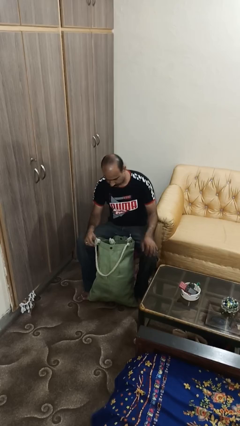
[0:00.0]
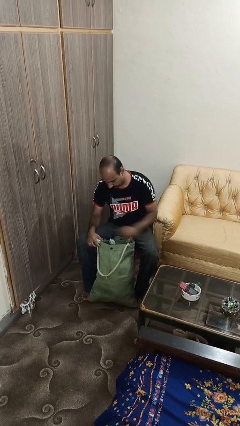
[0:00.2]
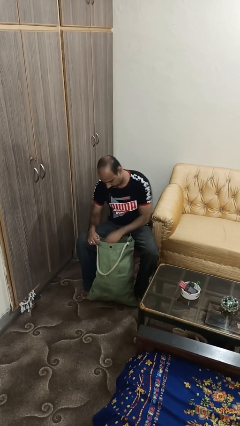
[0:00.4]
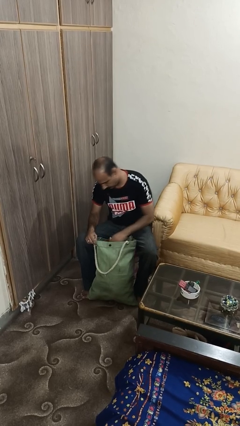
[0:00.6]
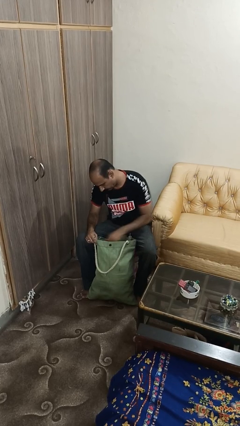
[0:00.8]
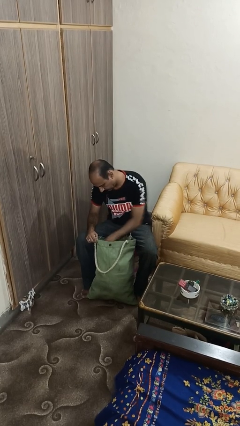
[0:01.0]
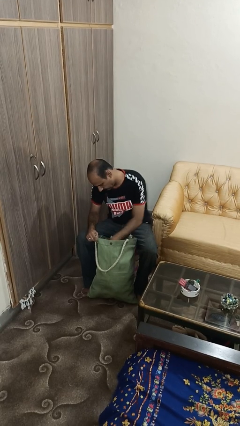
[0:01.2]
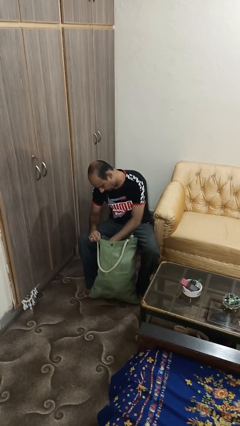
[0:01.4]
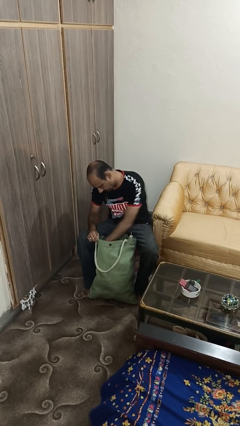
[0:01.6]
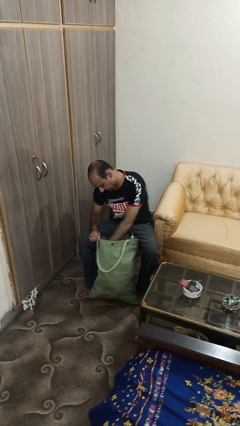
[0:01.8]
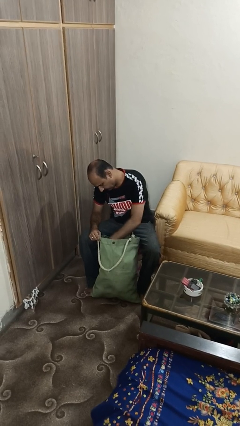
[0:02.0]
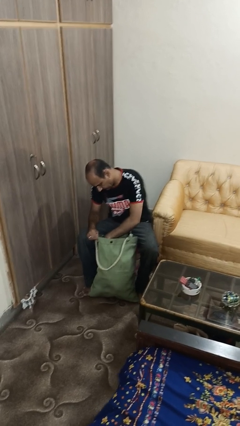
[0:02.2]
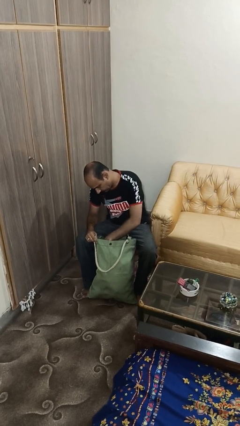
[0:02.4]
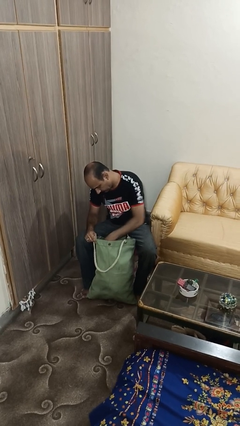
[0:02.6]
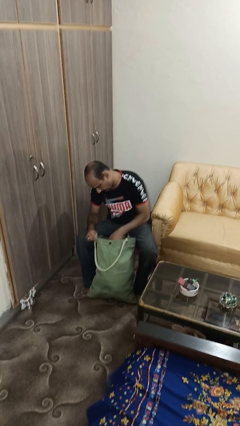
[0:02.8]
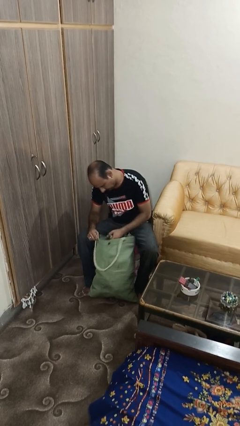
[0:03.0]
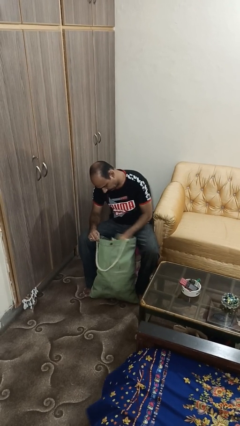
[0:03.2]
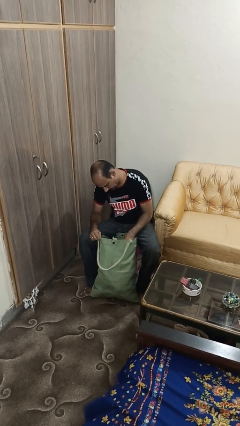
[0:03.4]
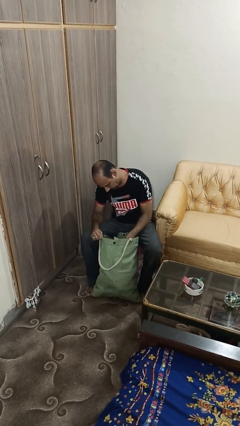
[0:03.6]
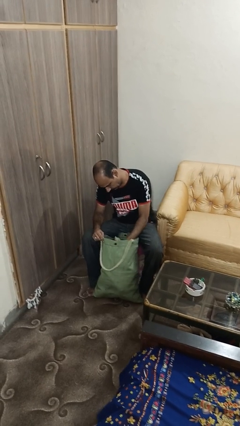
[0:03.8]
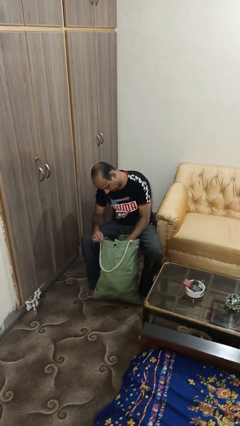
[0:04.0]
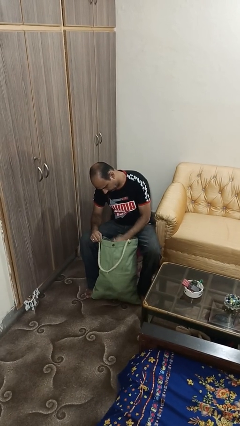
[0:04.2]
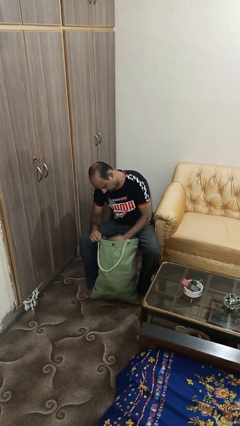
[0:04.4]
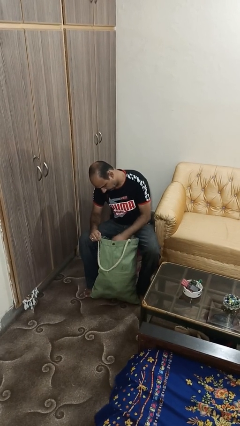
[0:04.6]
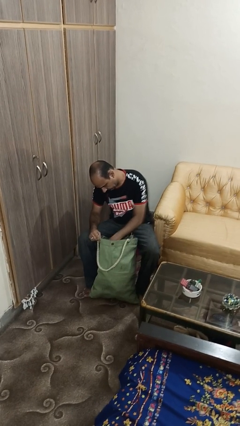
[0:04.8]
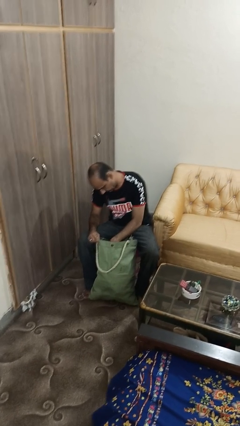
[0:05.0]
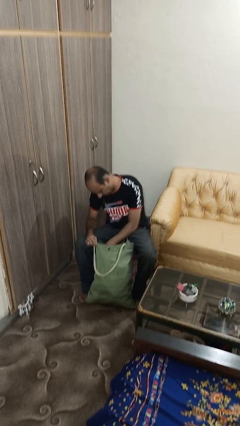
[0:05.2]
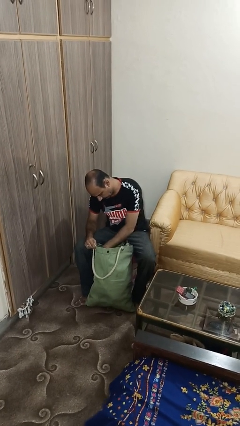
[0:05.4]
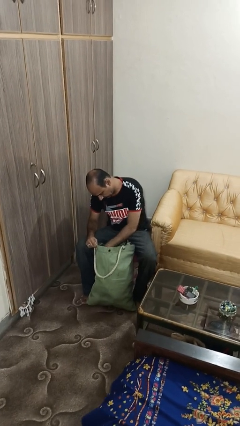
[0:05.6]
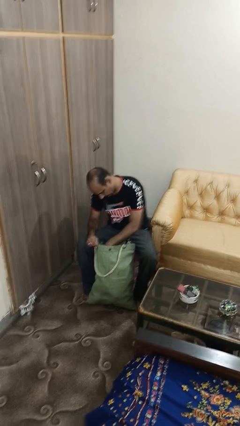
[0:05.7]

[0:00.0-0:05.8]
person searches in bag

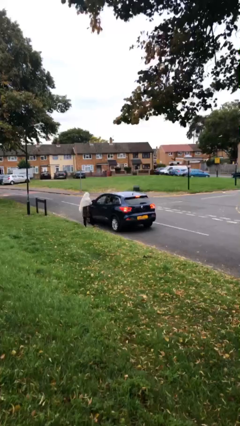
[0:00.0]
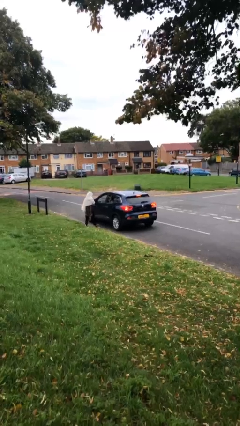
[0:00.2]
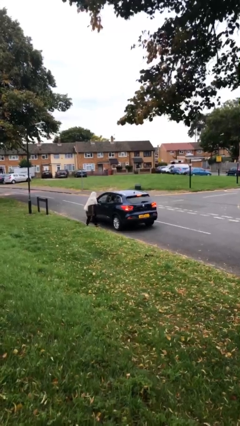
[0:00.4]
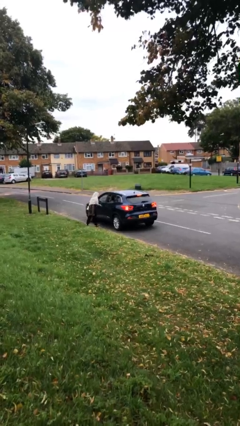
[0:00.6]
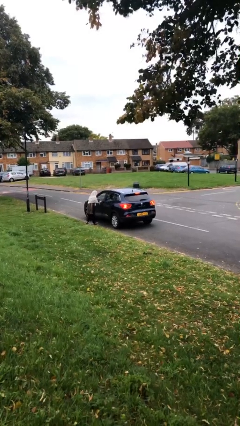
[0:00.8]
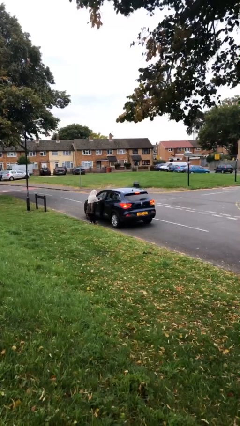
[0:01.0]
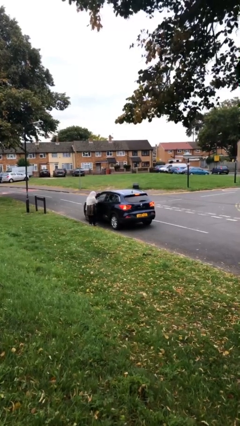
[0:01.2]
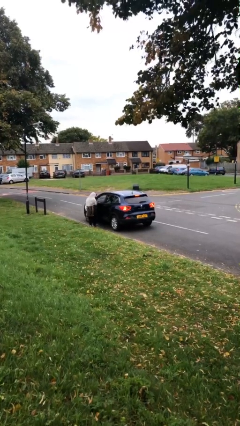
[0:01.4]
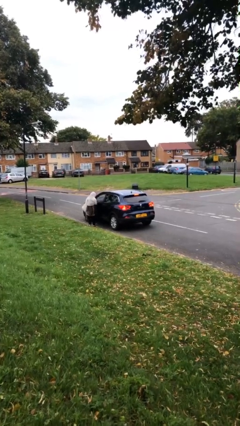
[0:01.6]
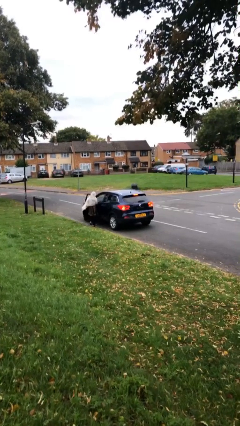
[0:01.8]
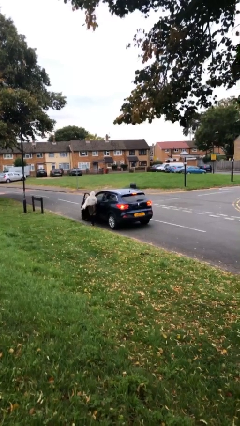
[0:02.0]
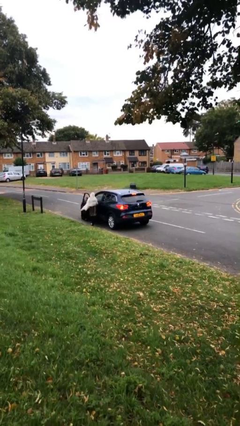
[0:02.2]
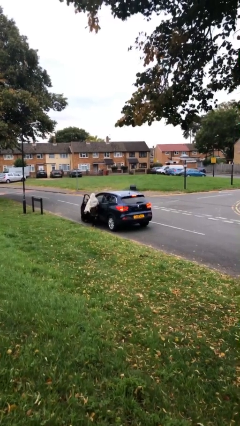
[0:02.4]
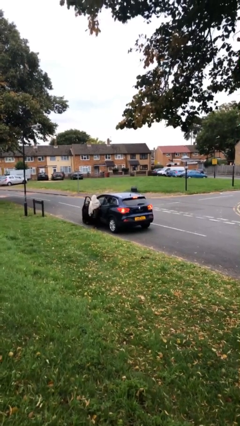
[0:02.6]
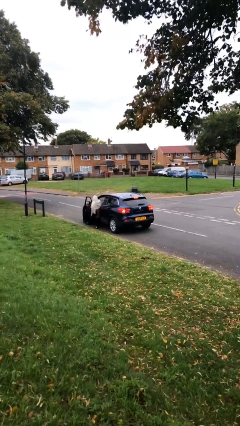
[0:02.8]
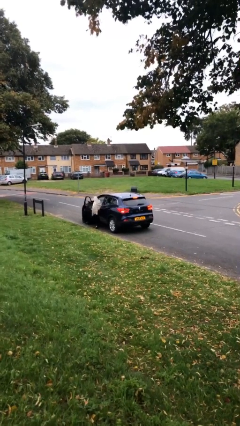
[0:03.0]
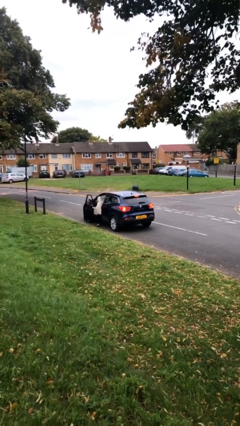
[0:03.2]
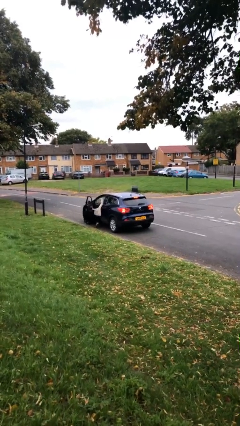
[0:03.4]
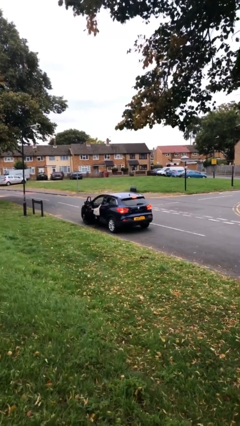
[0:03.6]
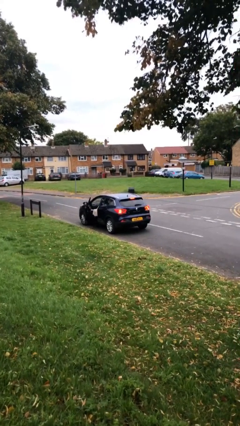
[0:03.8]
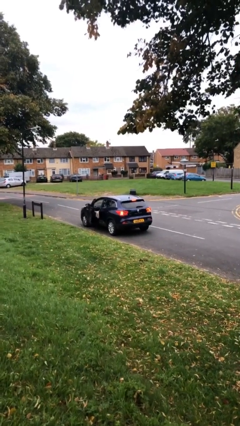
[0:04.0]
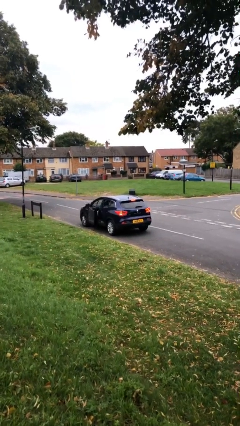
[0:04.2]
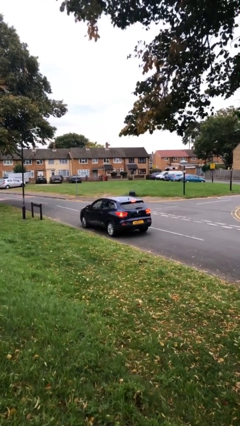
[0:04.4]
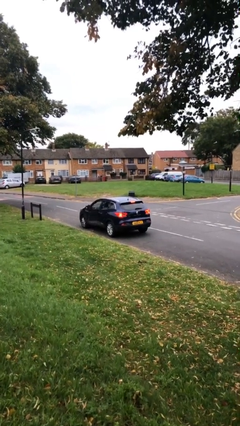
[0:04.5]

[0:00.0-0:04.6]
car picks up person

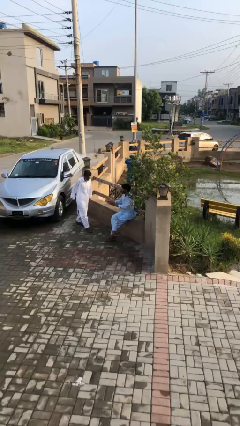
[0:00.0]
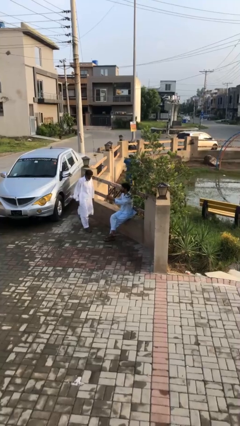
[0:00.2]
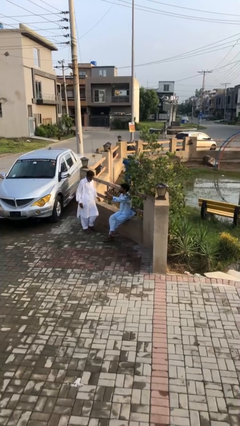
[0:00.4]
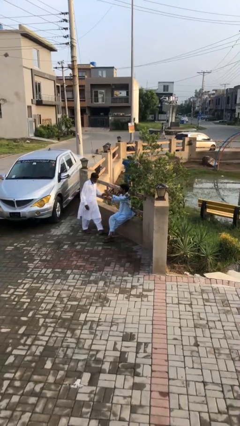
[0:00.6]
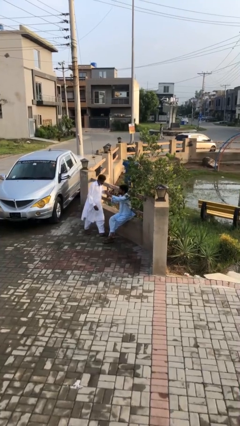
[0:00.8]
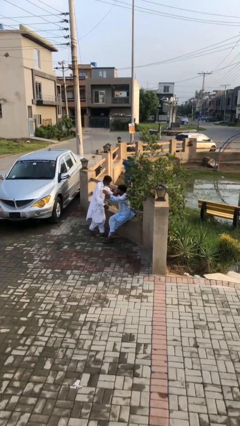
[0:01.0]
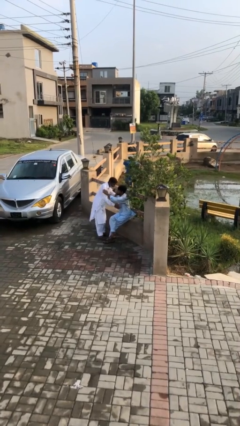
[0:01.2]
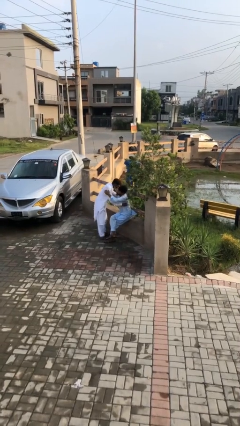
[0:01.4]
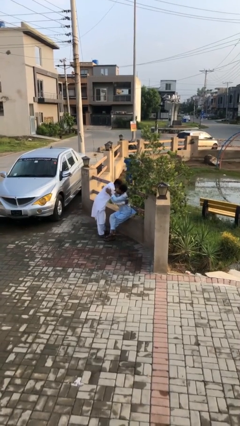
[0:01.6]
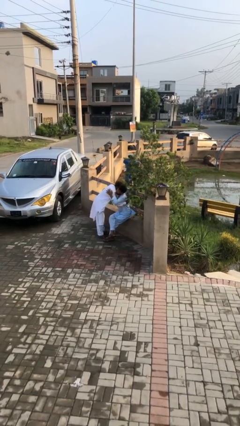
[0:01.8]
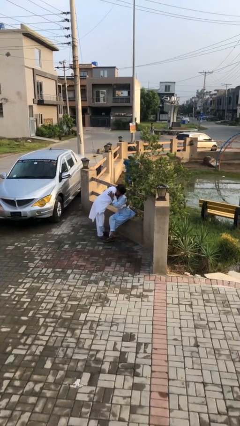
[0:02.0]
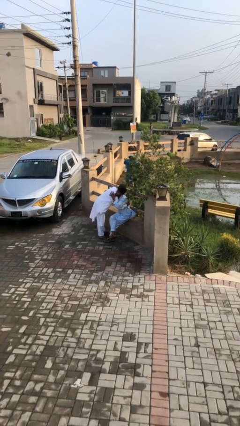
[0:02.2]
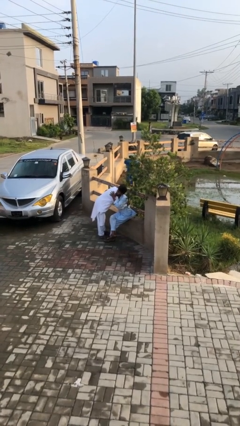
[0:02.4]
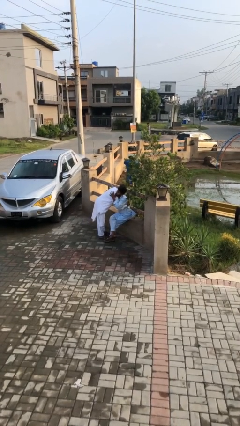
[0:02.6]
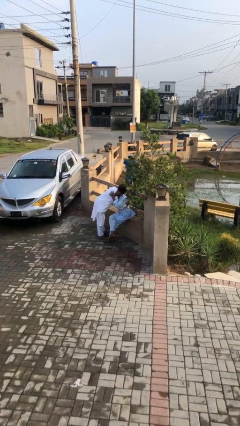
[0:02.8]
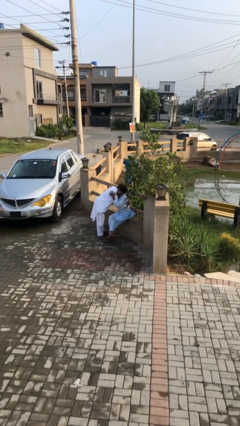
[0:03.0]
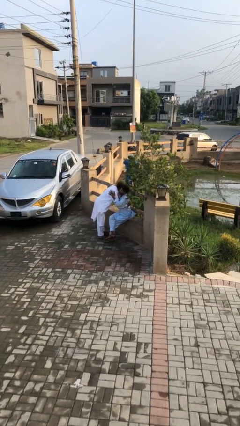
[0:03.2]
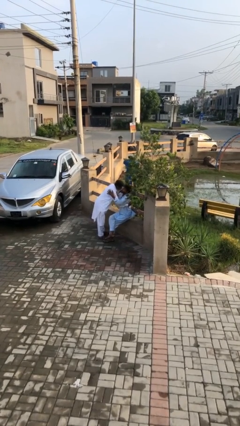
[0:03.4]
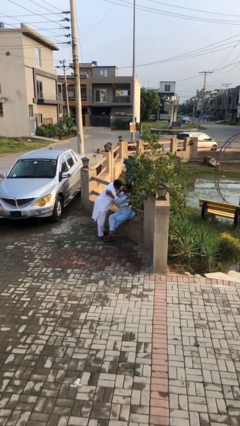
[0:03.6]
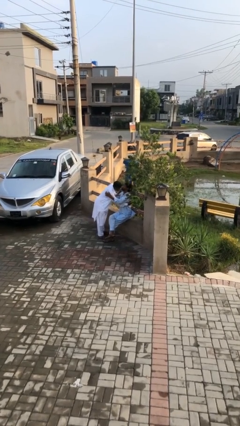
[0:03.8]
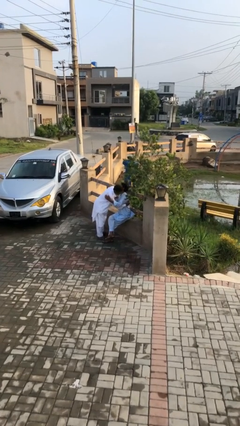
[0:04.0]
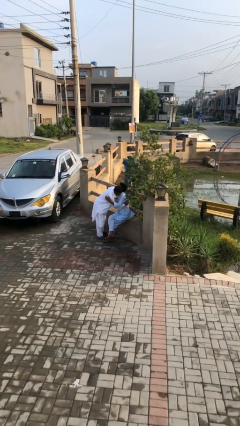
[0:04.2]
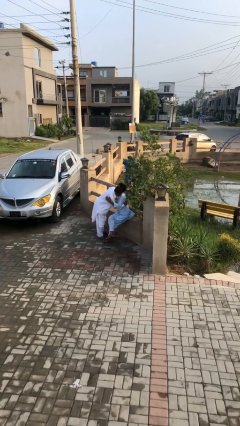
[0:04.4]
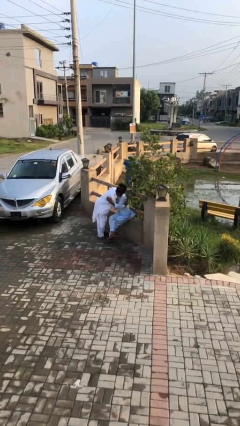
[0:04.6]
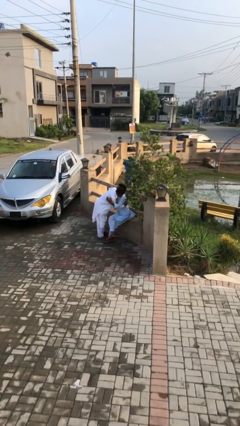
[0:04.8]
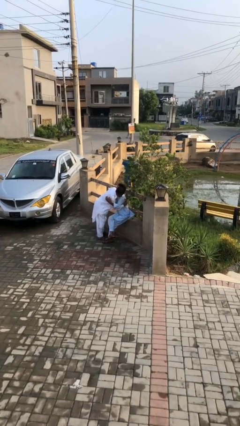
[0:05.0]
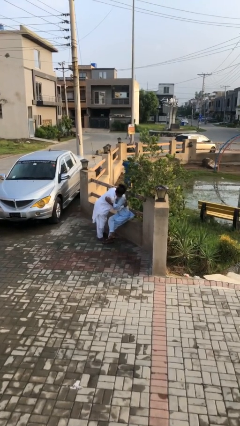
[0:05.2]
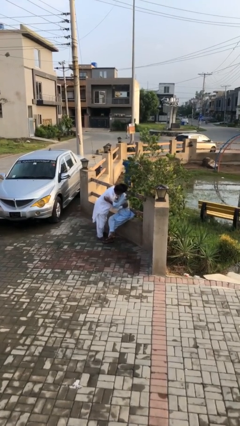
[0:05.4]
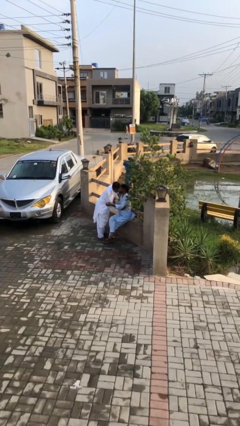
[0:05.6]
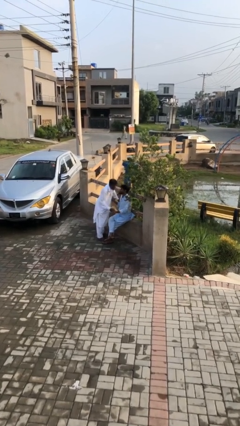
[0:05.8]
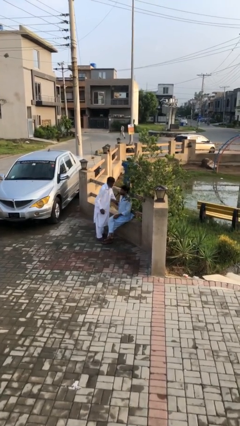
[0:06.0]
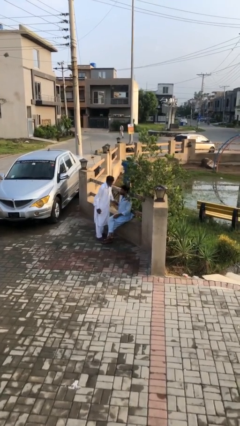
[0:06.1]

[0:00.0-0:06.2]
person embraces person

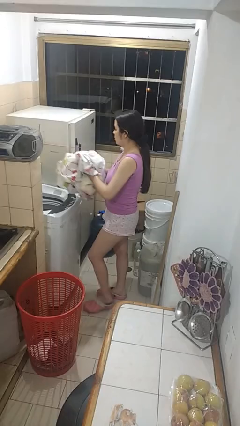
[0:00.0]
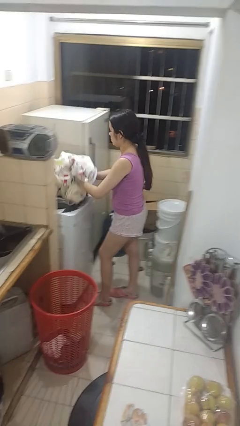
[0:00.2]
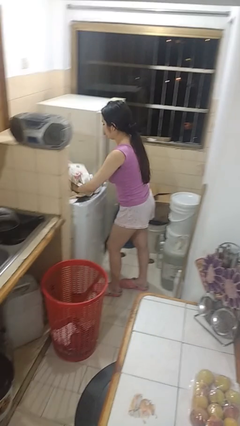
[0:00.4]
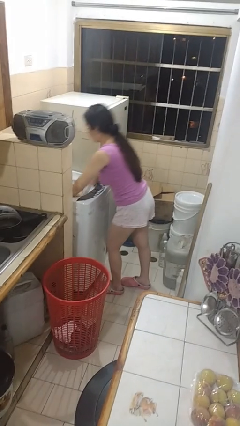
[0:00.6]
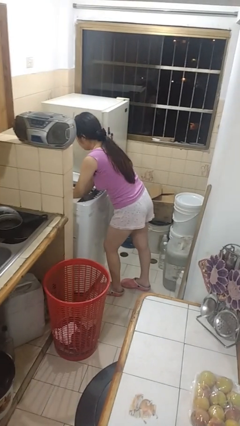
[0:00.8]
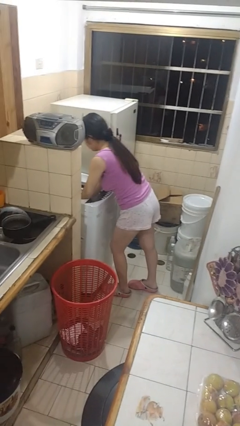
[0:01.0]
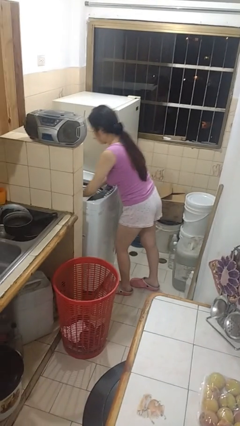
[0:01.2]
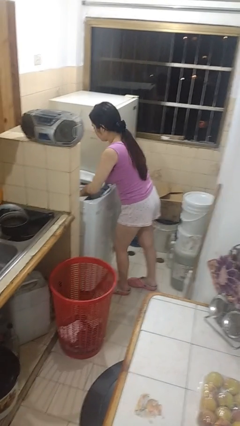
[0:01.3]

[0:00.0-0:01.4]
person loads clotheswasher
